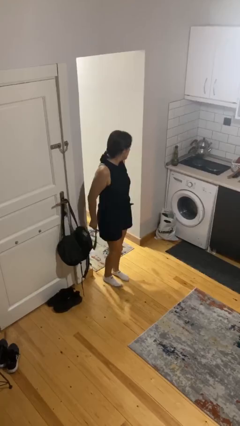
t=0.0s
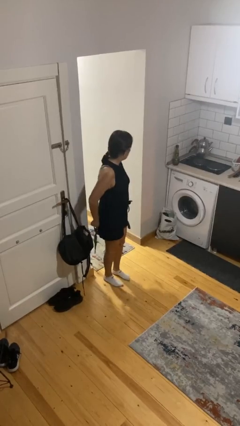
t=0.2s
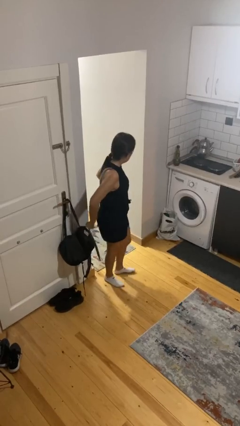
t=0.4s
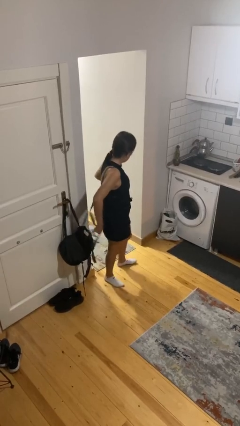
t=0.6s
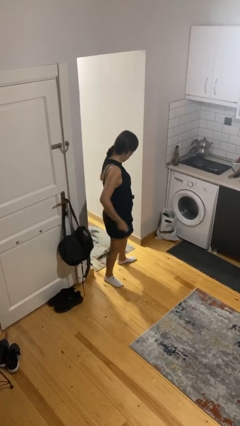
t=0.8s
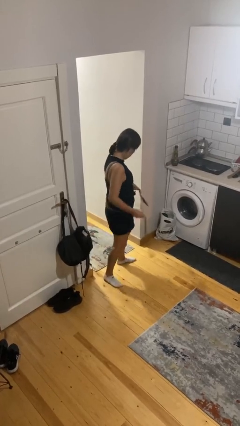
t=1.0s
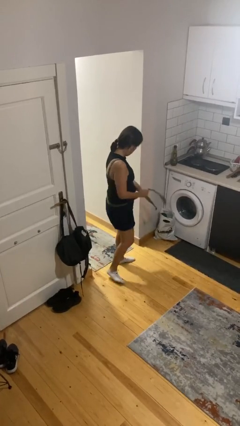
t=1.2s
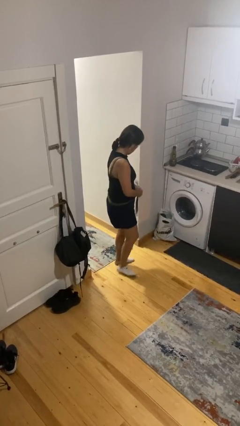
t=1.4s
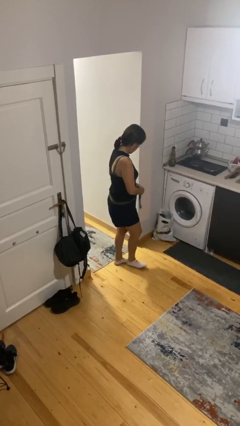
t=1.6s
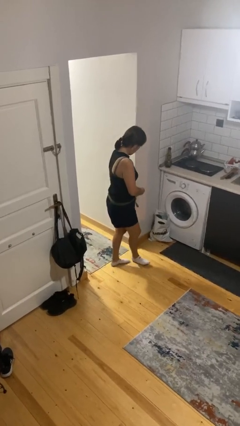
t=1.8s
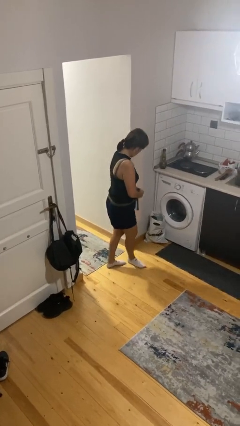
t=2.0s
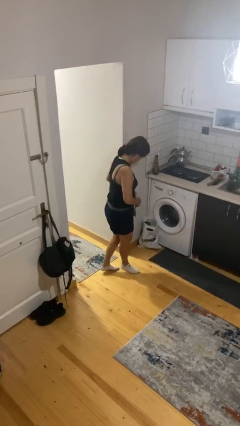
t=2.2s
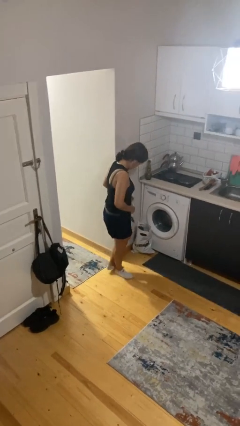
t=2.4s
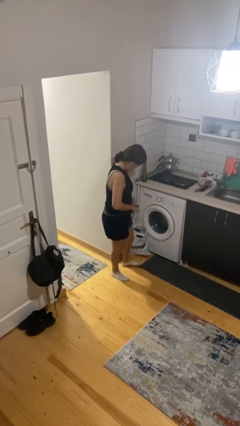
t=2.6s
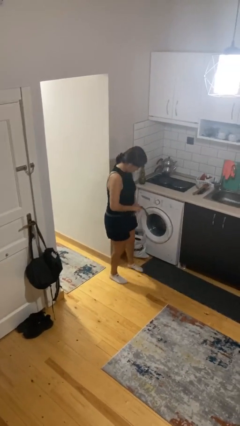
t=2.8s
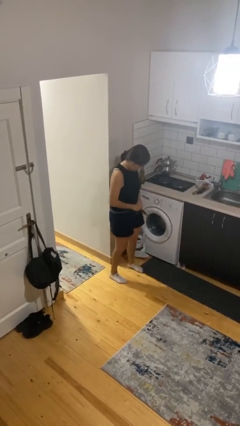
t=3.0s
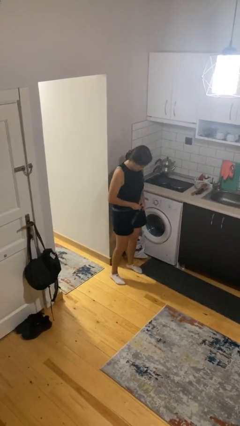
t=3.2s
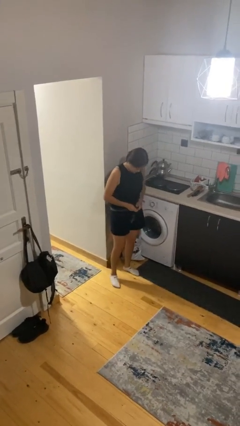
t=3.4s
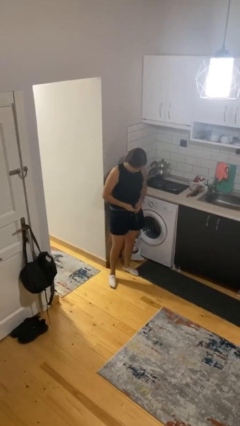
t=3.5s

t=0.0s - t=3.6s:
person puts on belt

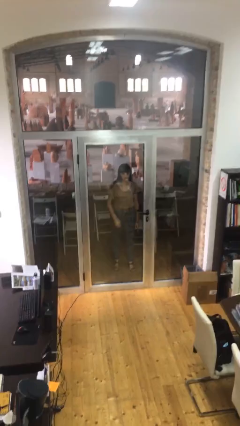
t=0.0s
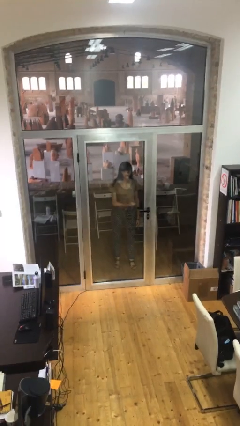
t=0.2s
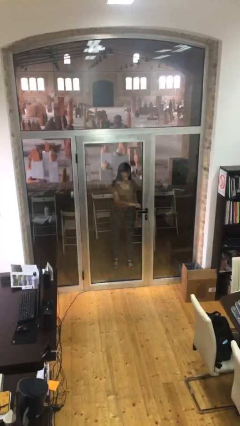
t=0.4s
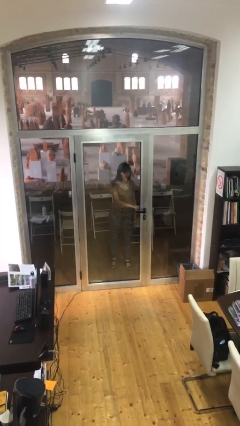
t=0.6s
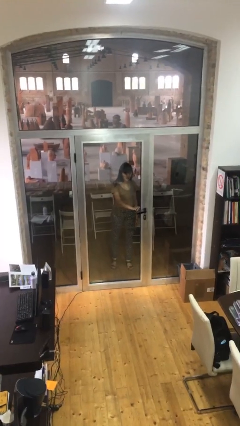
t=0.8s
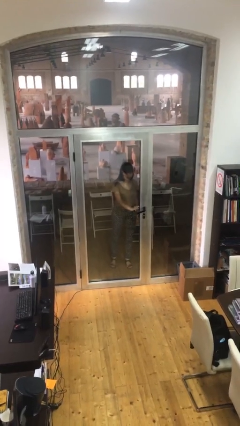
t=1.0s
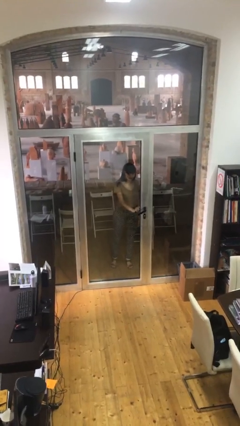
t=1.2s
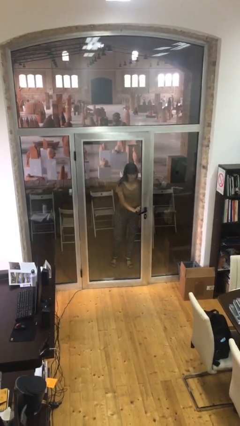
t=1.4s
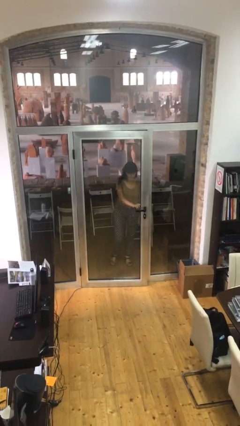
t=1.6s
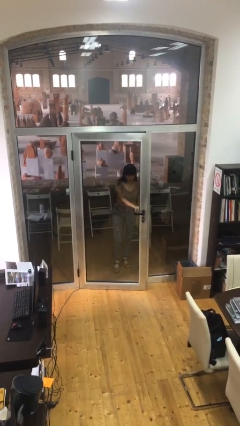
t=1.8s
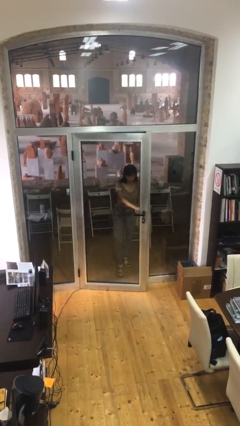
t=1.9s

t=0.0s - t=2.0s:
person opens facility door

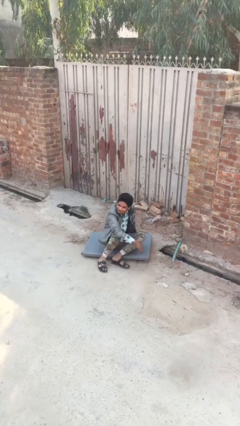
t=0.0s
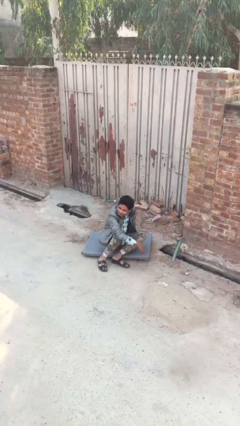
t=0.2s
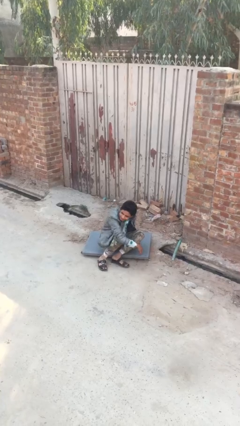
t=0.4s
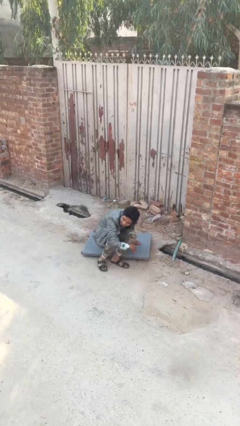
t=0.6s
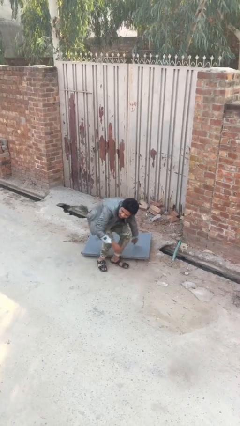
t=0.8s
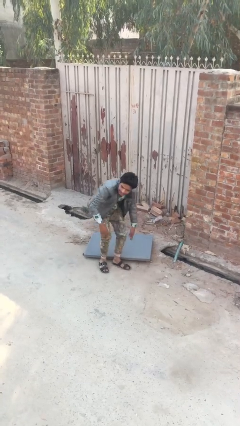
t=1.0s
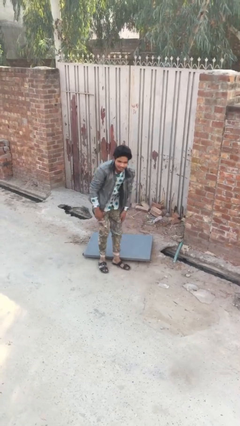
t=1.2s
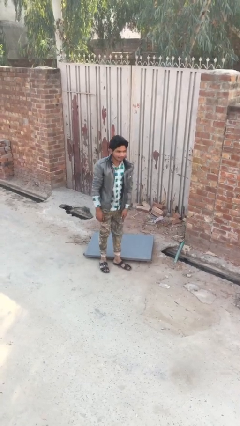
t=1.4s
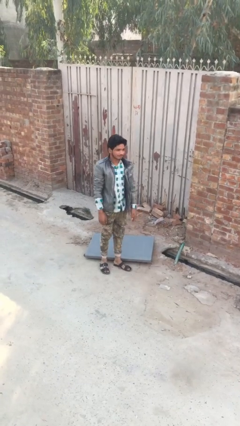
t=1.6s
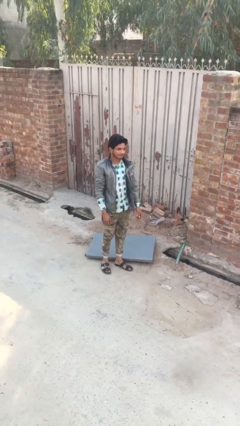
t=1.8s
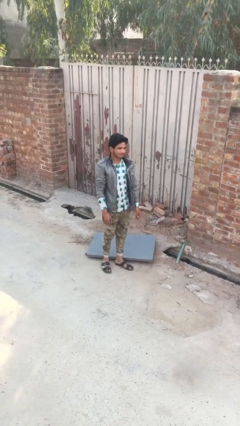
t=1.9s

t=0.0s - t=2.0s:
person stands up

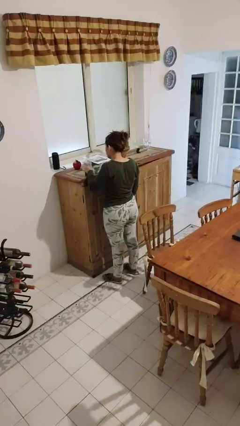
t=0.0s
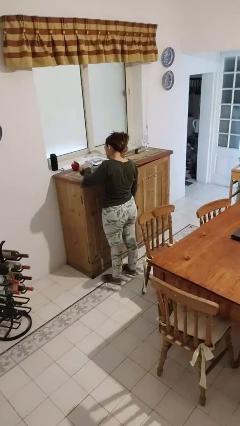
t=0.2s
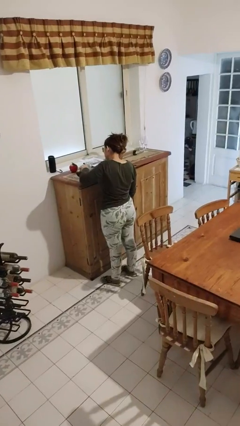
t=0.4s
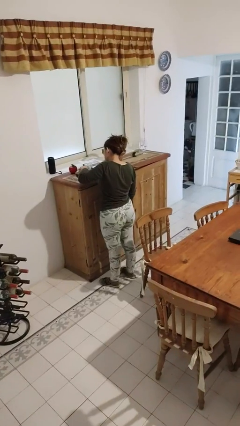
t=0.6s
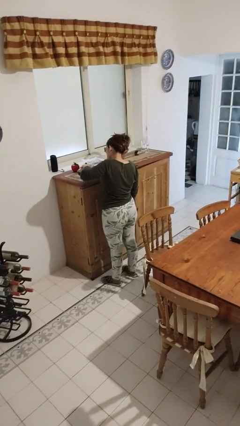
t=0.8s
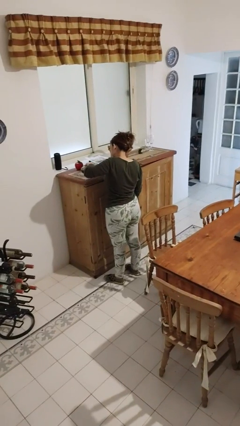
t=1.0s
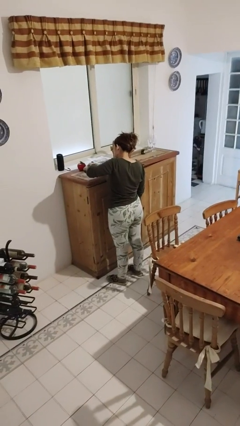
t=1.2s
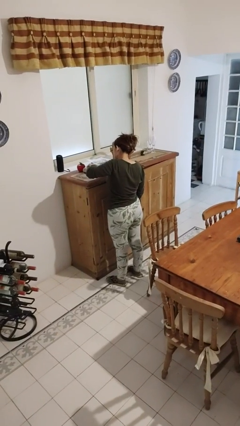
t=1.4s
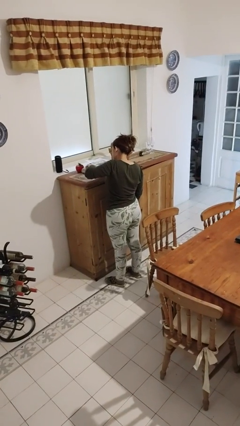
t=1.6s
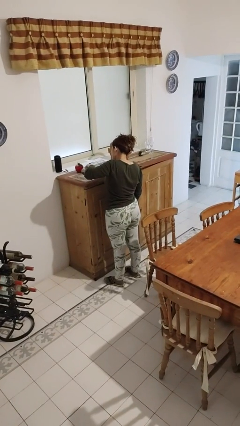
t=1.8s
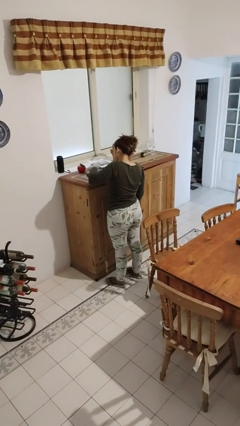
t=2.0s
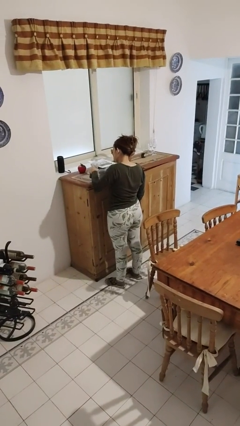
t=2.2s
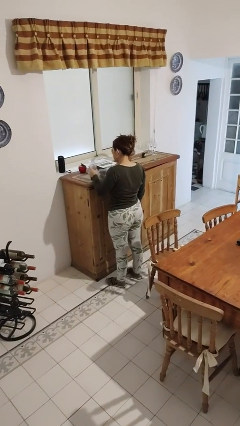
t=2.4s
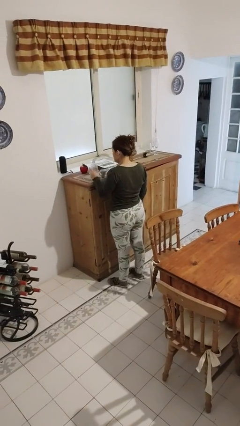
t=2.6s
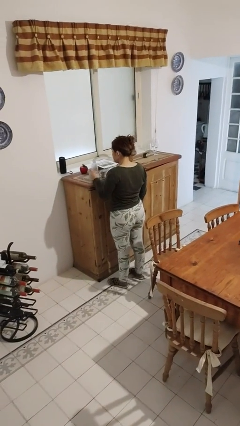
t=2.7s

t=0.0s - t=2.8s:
person pours liquid into cup

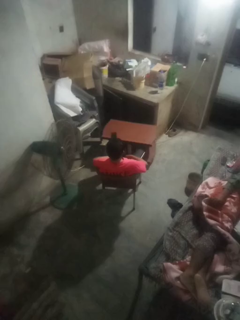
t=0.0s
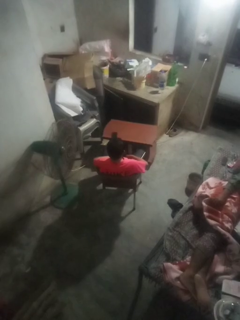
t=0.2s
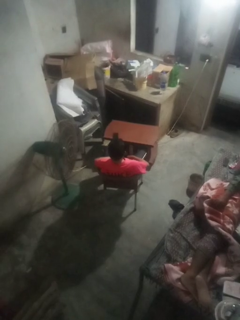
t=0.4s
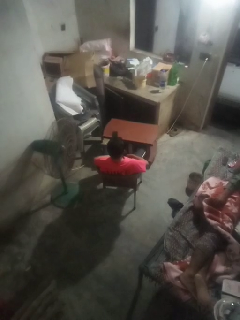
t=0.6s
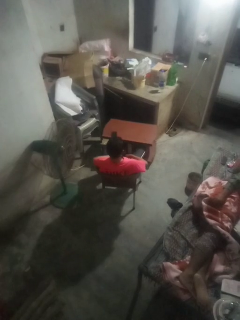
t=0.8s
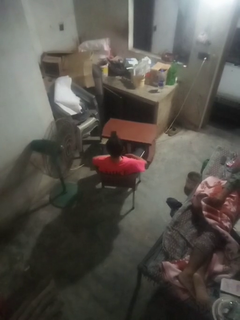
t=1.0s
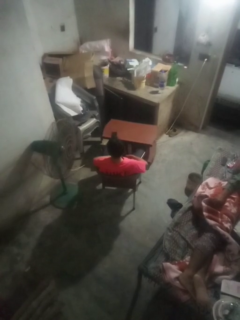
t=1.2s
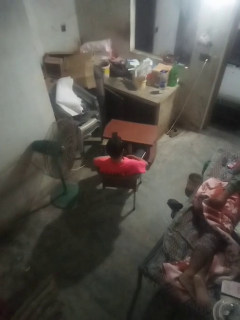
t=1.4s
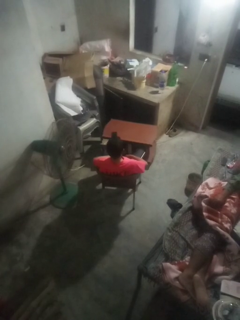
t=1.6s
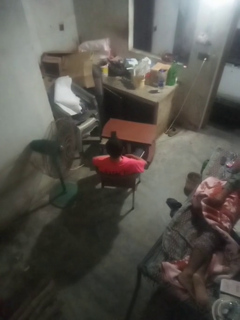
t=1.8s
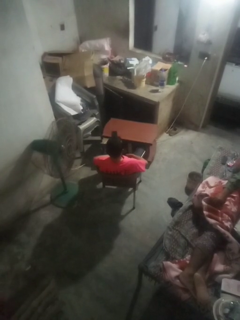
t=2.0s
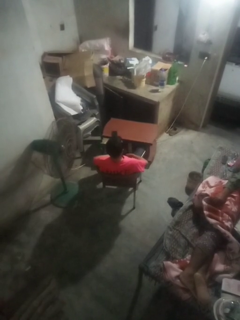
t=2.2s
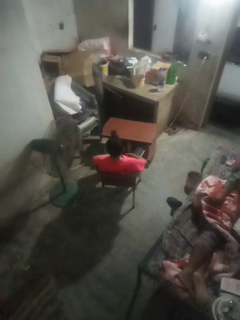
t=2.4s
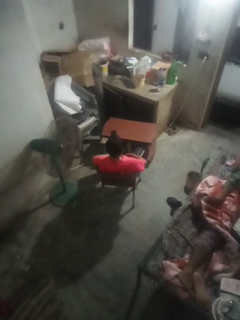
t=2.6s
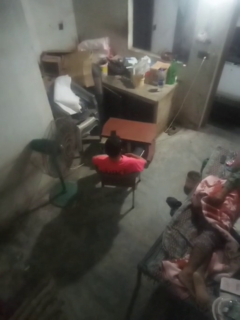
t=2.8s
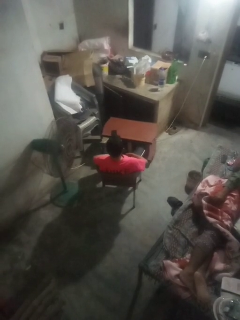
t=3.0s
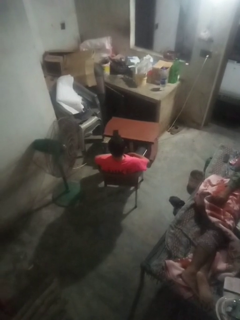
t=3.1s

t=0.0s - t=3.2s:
person shakes head

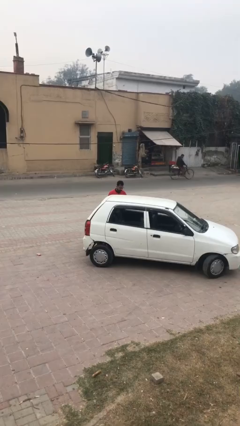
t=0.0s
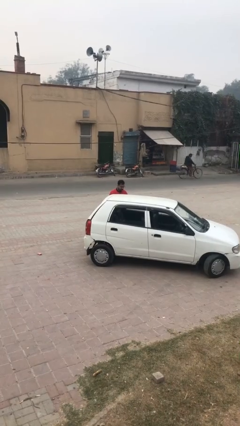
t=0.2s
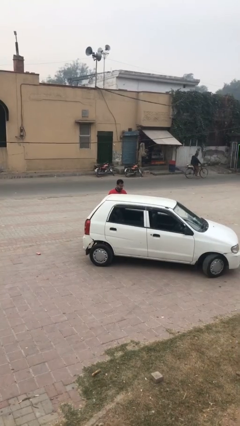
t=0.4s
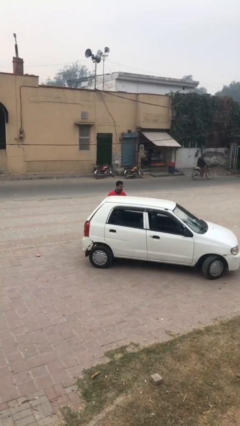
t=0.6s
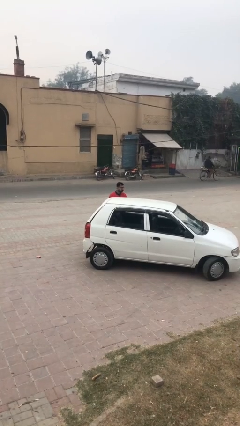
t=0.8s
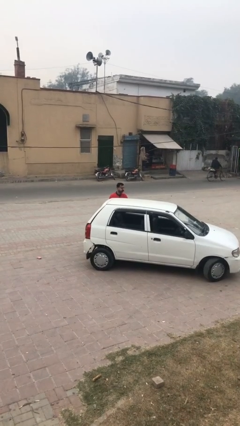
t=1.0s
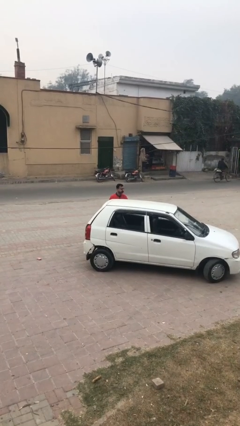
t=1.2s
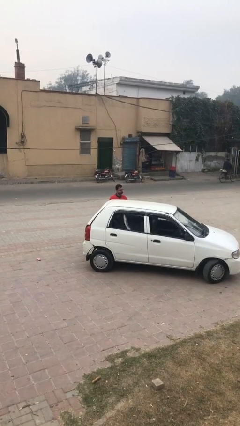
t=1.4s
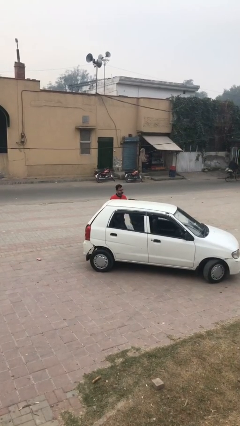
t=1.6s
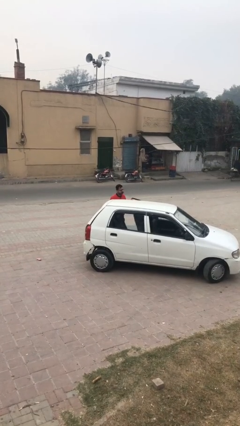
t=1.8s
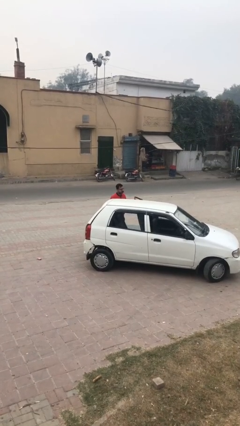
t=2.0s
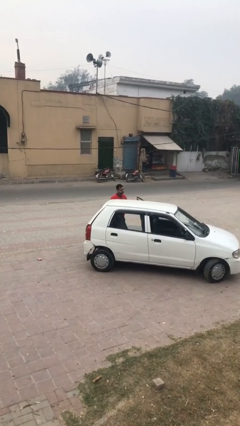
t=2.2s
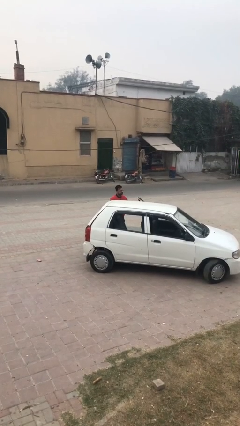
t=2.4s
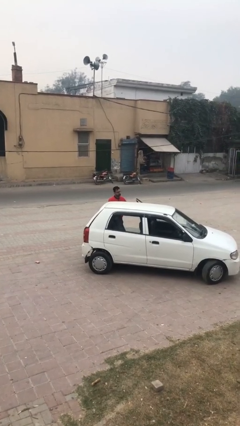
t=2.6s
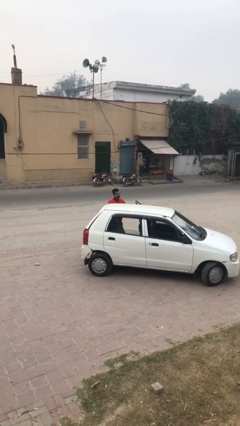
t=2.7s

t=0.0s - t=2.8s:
person opens car door

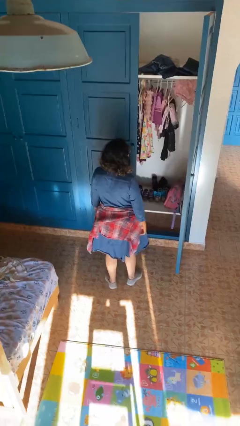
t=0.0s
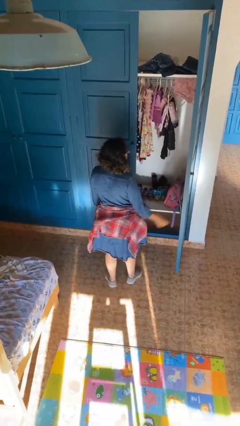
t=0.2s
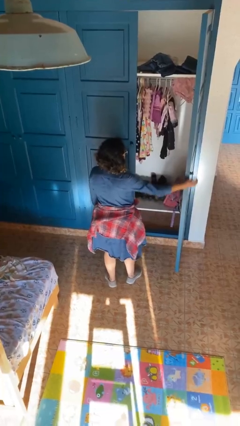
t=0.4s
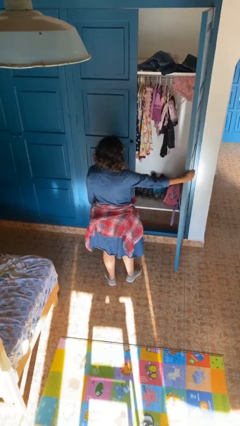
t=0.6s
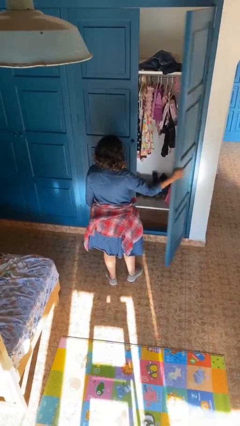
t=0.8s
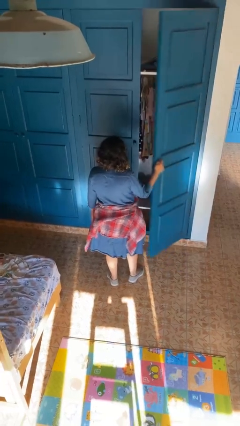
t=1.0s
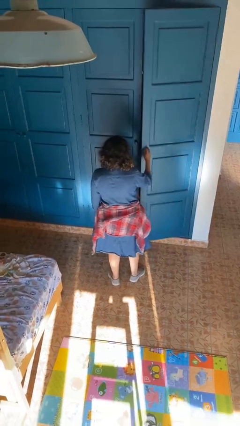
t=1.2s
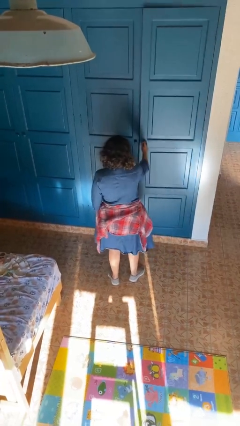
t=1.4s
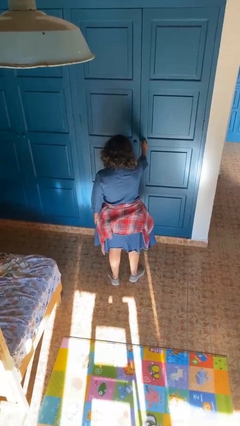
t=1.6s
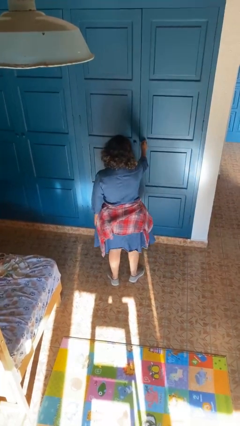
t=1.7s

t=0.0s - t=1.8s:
person closes closet door
